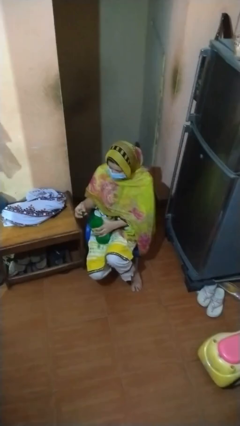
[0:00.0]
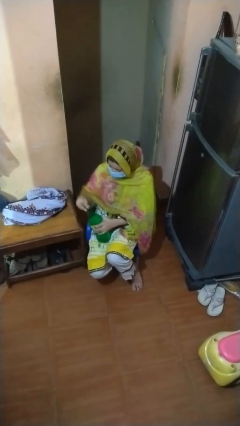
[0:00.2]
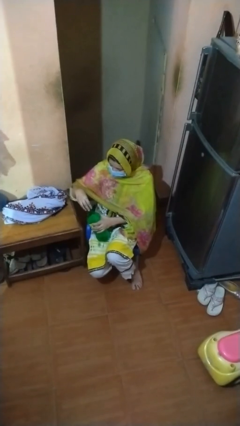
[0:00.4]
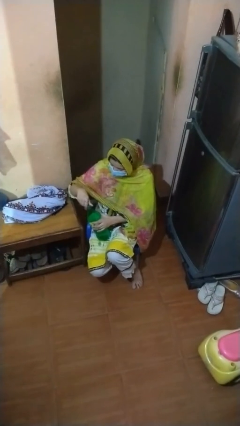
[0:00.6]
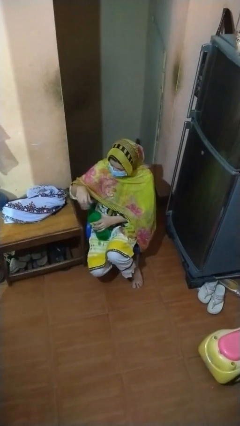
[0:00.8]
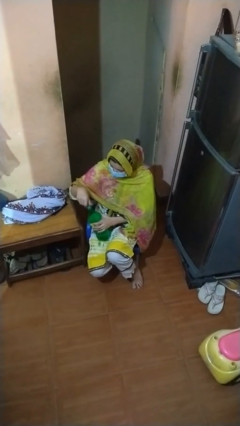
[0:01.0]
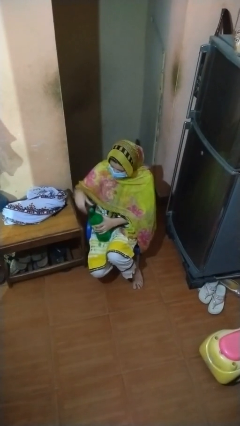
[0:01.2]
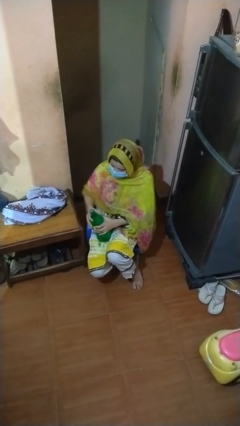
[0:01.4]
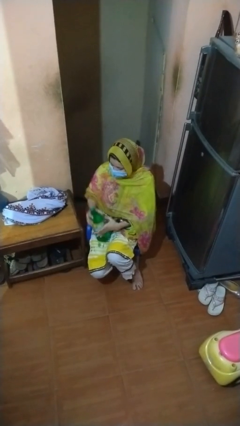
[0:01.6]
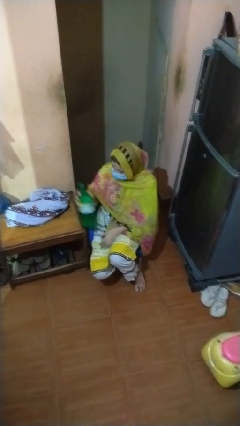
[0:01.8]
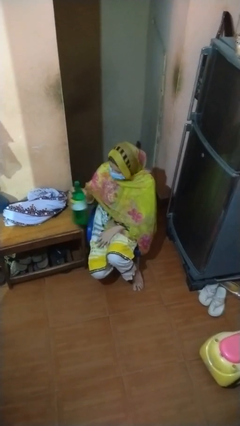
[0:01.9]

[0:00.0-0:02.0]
person screws lid to bottle

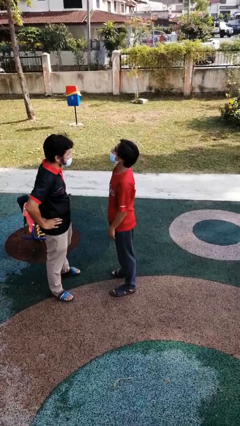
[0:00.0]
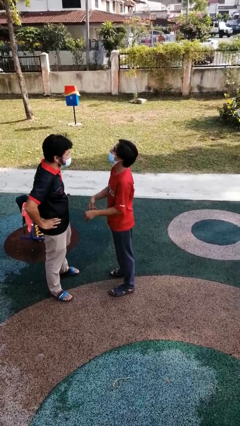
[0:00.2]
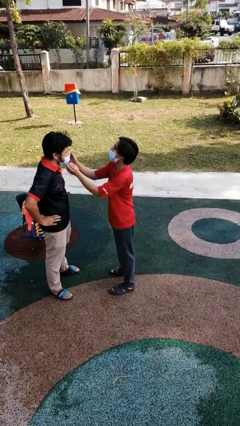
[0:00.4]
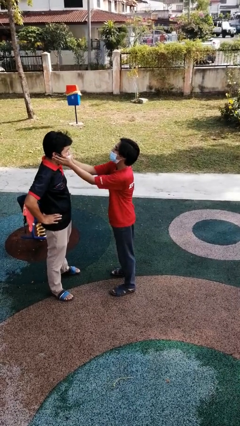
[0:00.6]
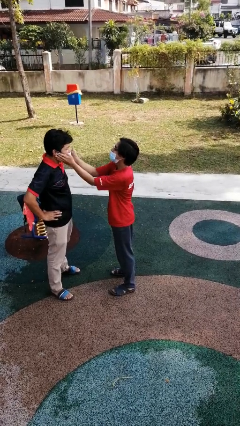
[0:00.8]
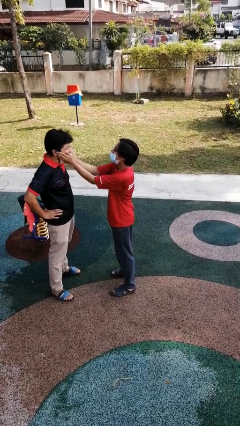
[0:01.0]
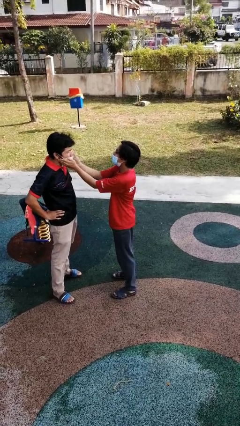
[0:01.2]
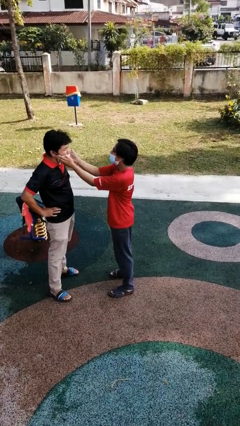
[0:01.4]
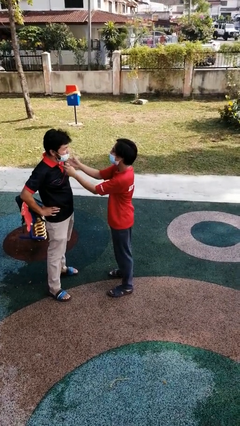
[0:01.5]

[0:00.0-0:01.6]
person touches face of person

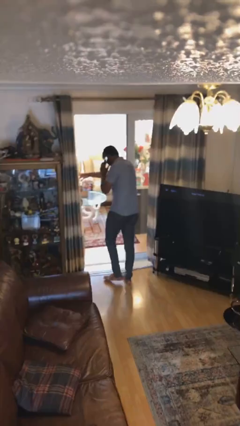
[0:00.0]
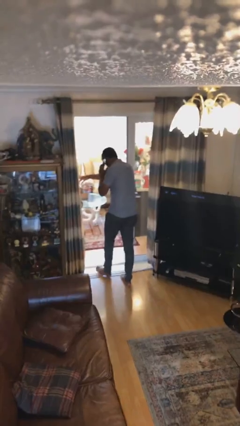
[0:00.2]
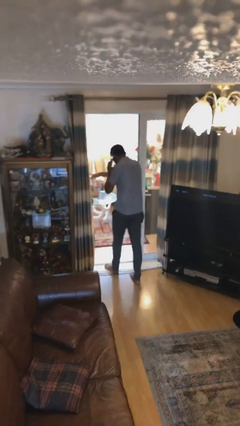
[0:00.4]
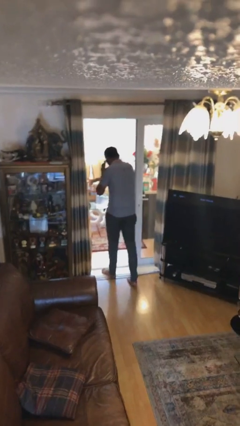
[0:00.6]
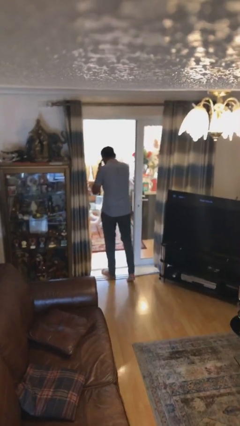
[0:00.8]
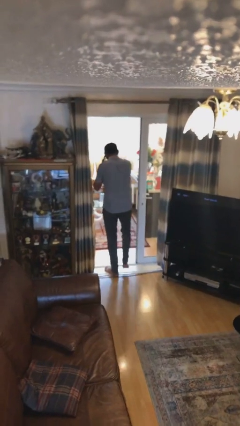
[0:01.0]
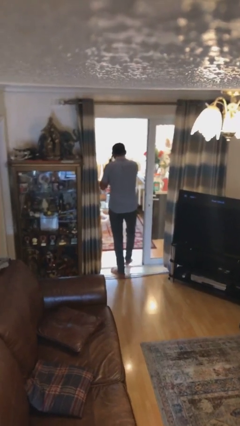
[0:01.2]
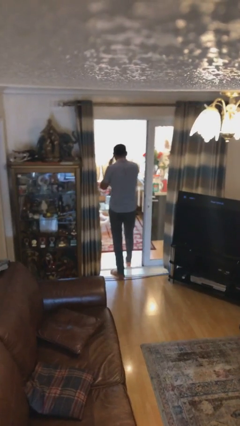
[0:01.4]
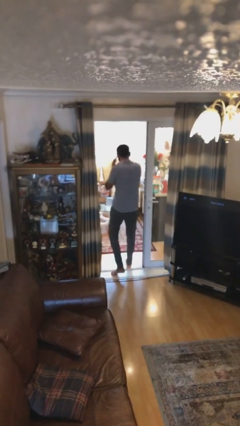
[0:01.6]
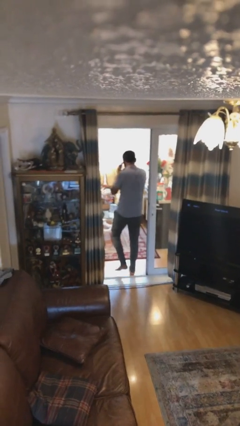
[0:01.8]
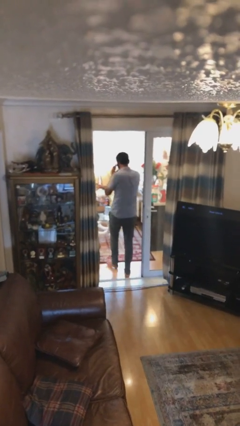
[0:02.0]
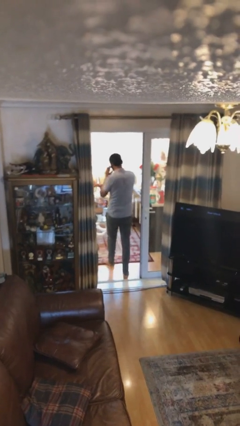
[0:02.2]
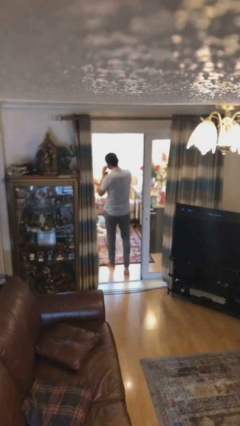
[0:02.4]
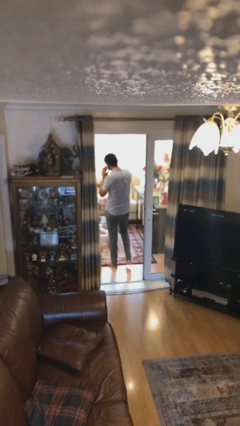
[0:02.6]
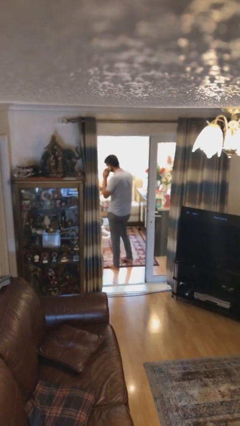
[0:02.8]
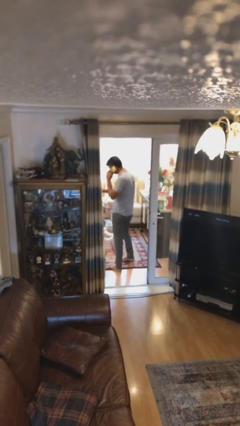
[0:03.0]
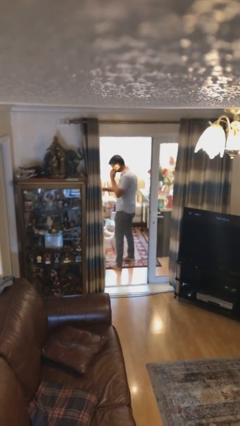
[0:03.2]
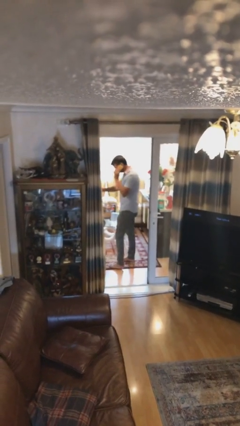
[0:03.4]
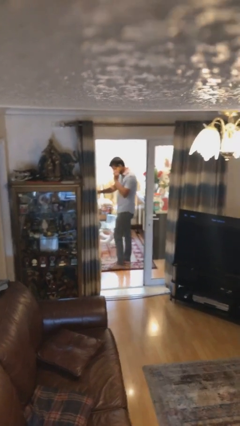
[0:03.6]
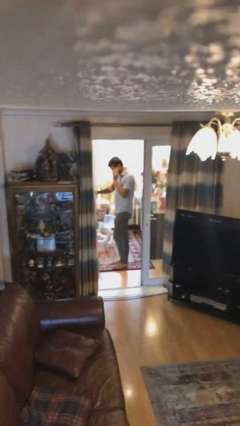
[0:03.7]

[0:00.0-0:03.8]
person exits scene through structure

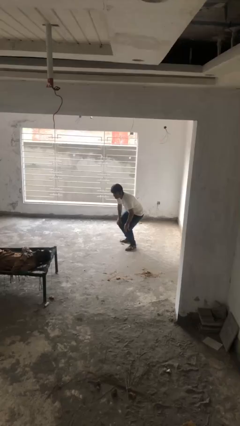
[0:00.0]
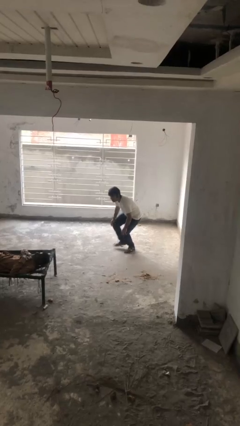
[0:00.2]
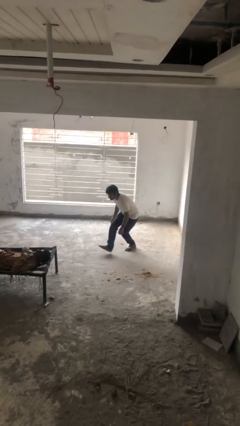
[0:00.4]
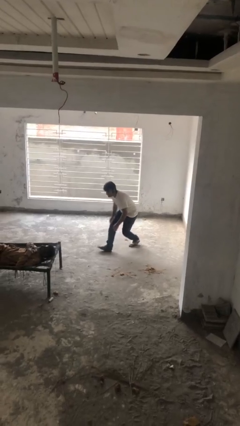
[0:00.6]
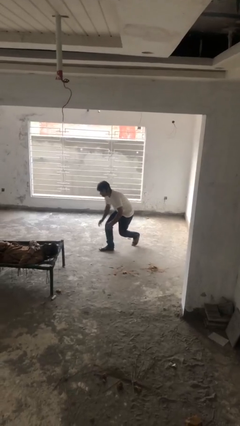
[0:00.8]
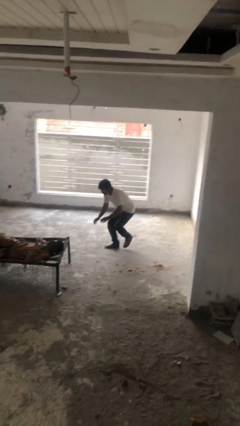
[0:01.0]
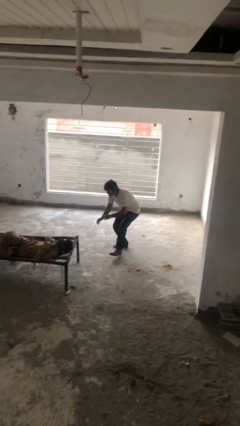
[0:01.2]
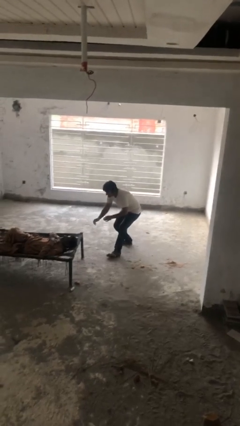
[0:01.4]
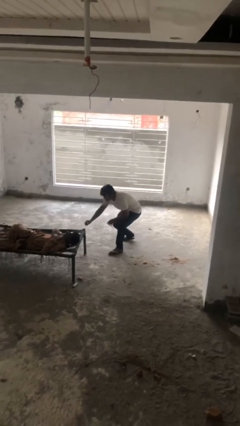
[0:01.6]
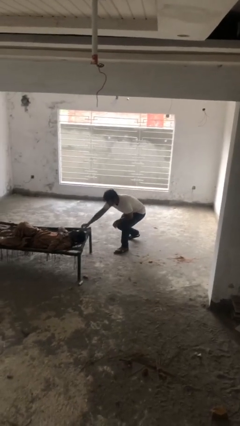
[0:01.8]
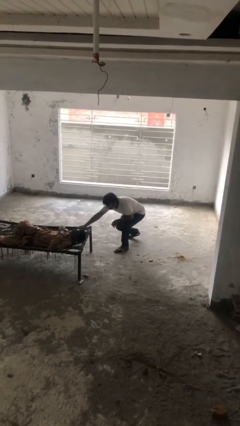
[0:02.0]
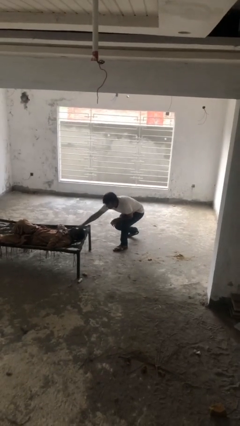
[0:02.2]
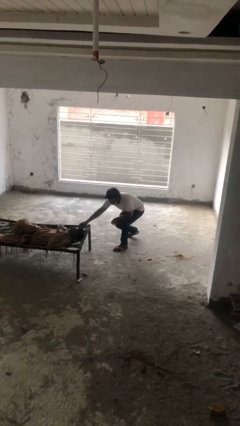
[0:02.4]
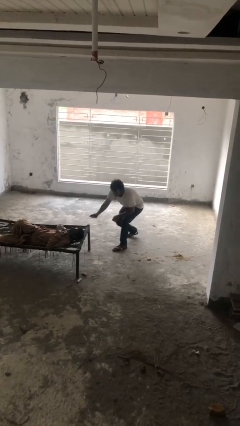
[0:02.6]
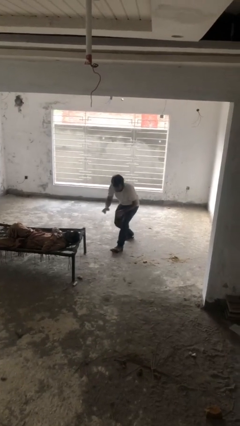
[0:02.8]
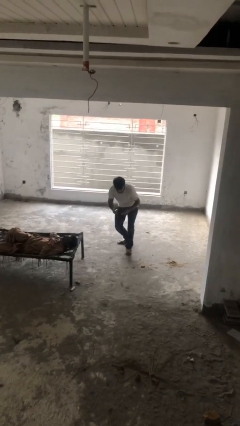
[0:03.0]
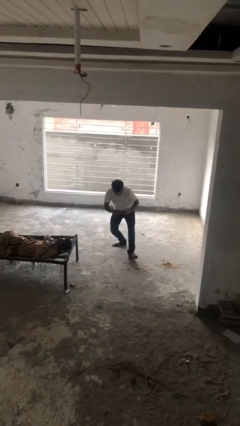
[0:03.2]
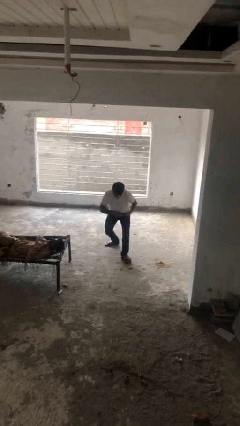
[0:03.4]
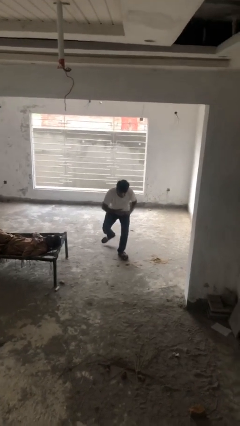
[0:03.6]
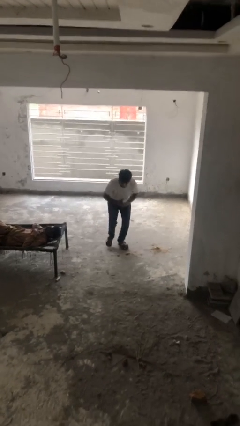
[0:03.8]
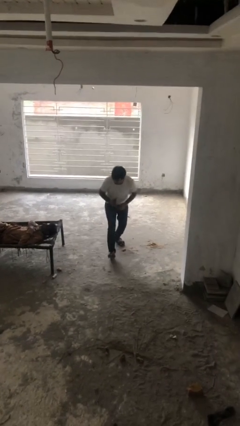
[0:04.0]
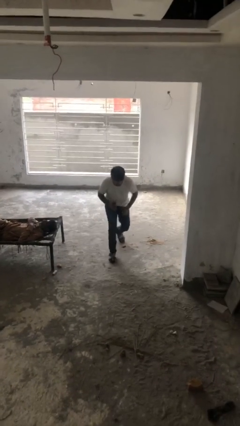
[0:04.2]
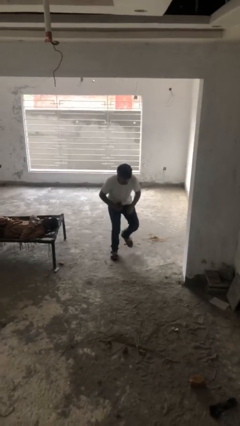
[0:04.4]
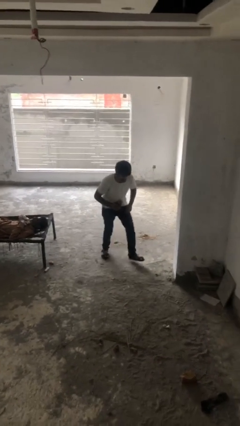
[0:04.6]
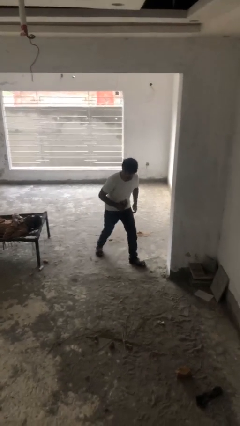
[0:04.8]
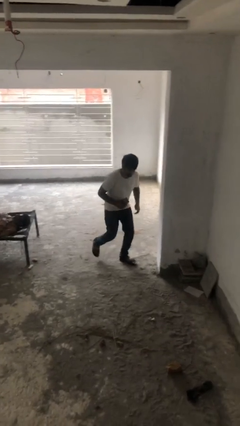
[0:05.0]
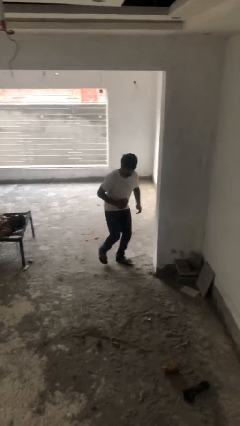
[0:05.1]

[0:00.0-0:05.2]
person steals object from person

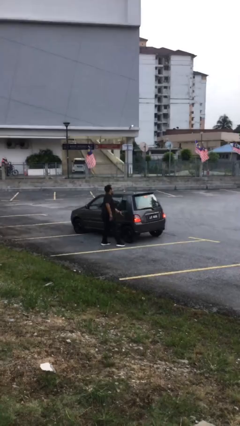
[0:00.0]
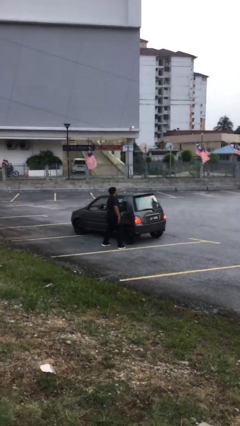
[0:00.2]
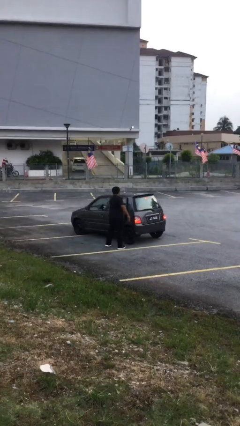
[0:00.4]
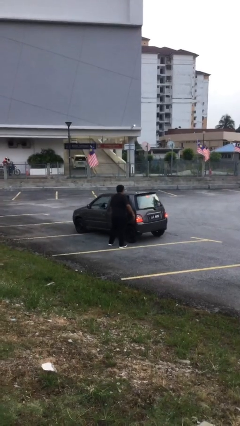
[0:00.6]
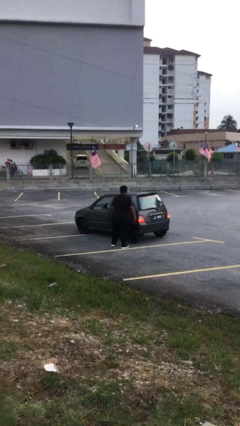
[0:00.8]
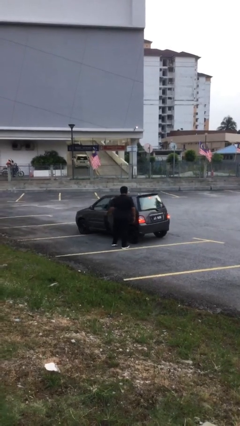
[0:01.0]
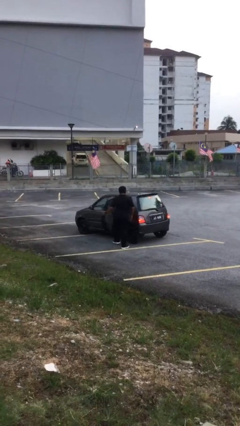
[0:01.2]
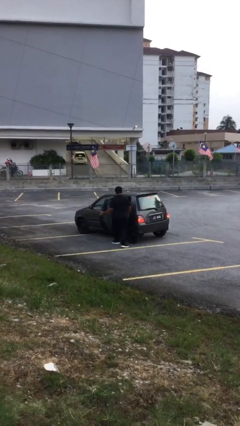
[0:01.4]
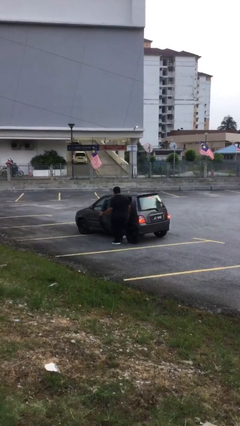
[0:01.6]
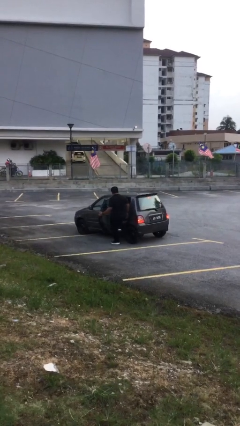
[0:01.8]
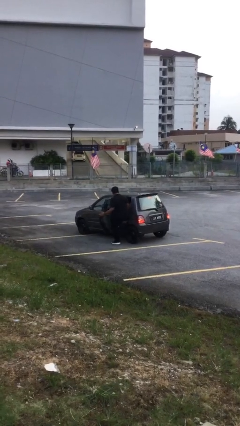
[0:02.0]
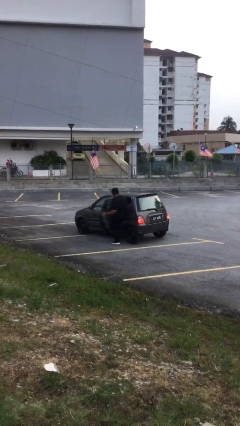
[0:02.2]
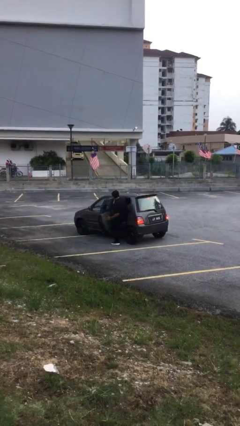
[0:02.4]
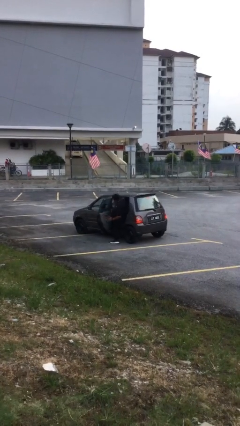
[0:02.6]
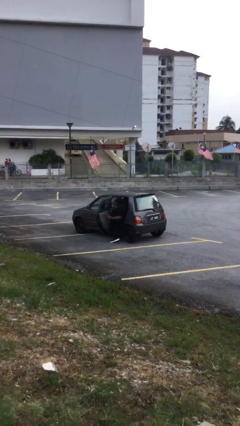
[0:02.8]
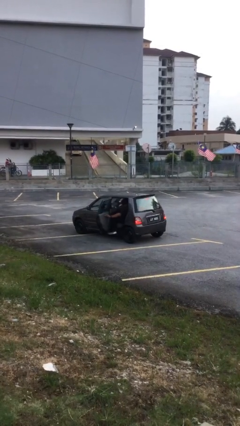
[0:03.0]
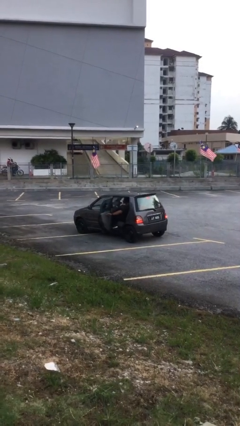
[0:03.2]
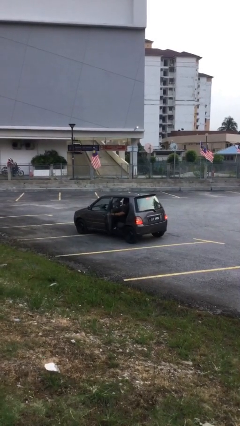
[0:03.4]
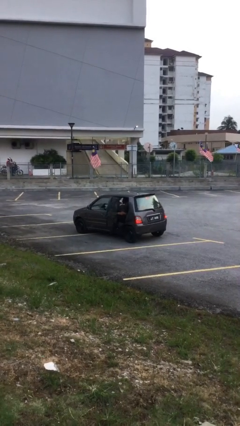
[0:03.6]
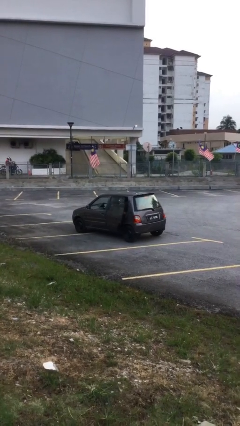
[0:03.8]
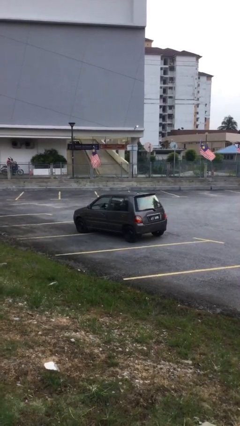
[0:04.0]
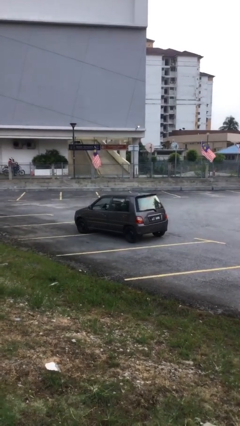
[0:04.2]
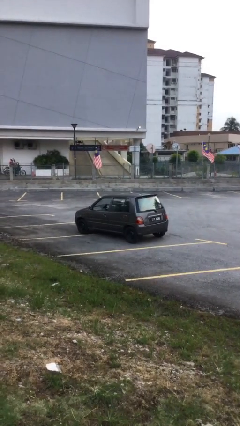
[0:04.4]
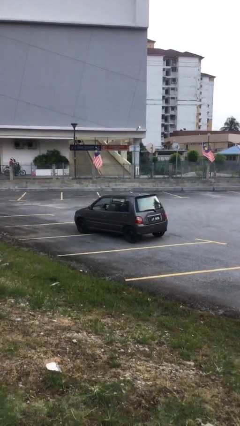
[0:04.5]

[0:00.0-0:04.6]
car picks up person

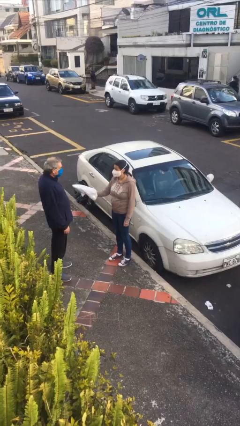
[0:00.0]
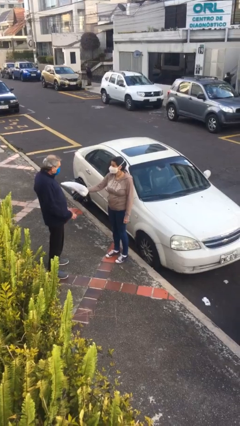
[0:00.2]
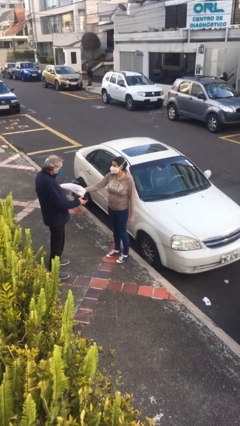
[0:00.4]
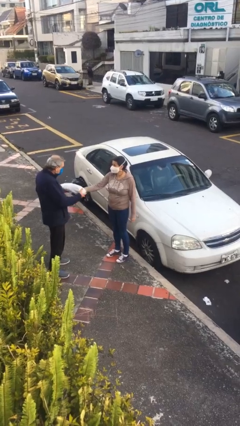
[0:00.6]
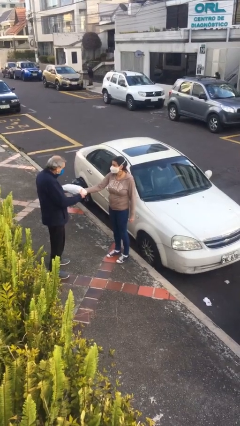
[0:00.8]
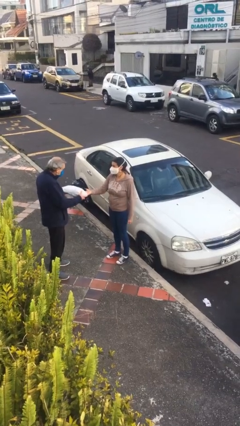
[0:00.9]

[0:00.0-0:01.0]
person transfers object to person
